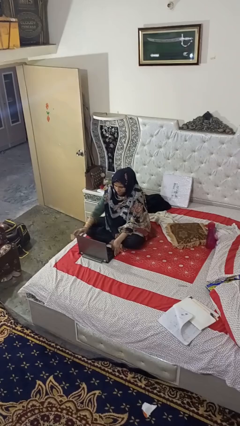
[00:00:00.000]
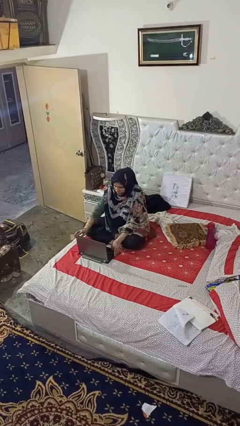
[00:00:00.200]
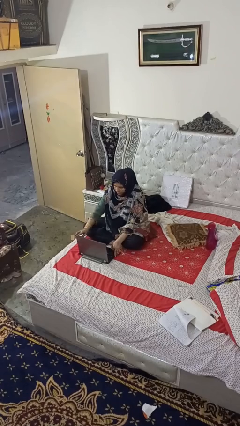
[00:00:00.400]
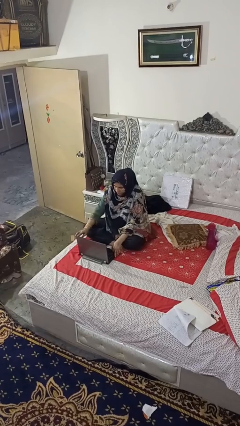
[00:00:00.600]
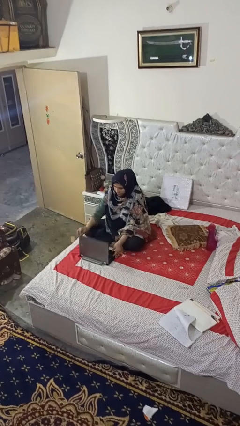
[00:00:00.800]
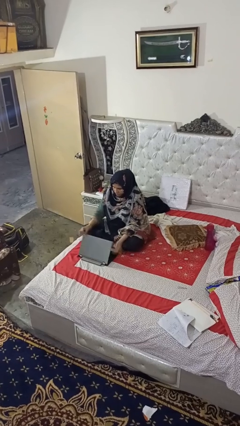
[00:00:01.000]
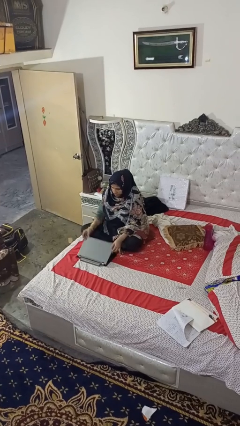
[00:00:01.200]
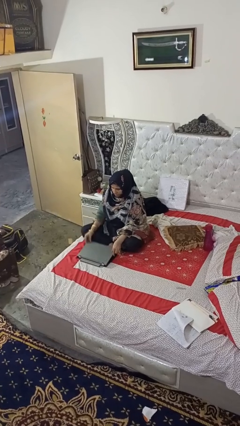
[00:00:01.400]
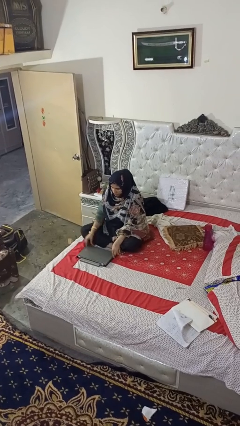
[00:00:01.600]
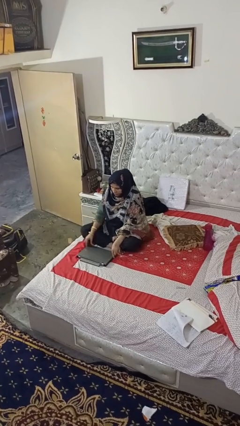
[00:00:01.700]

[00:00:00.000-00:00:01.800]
person closes laptop

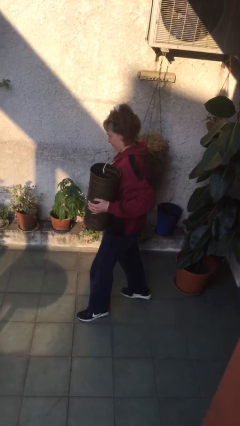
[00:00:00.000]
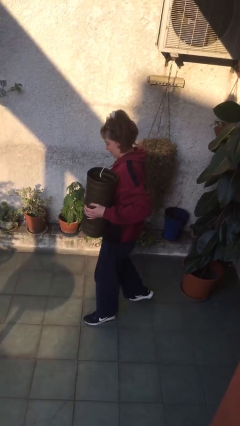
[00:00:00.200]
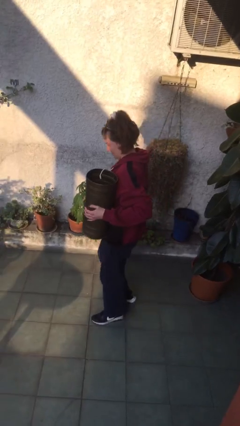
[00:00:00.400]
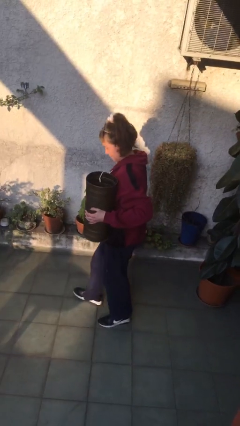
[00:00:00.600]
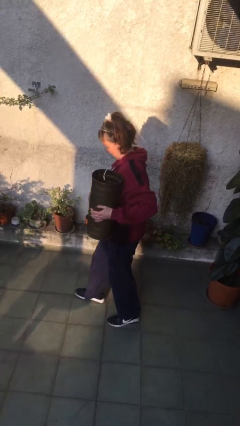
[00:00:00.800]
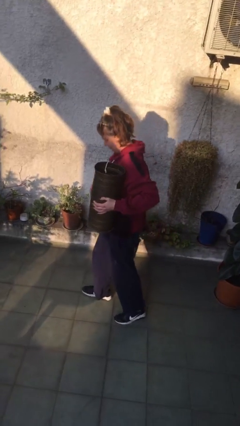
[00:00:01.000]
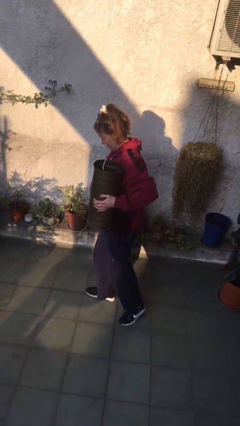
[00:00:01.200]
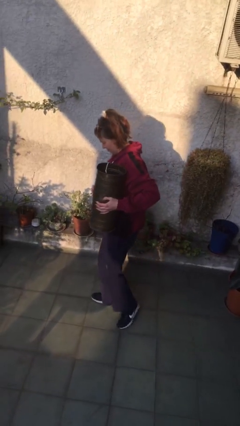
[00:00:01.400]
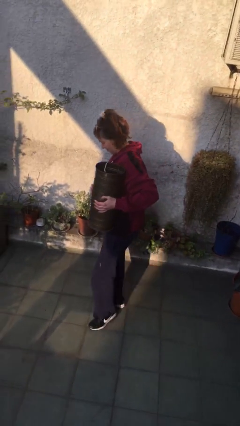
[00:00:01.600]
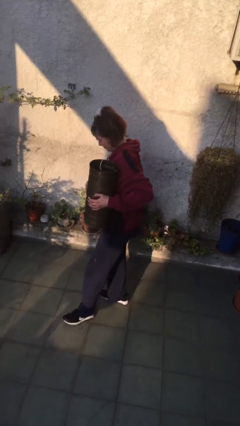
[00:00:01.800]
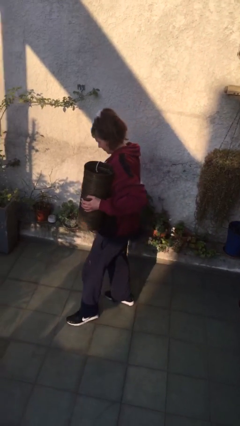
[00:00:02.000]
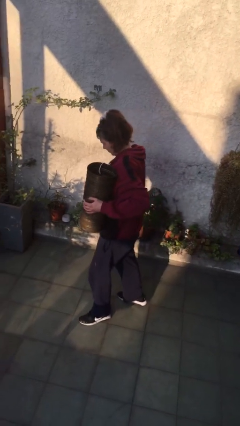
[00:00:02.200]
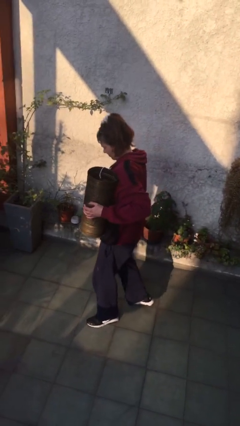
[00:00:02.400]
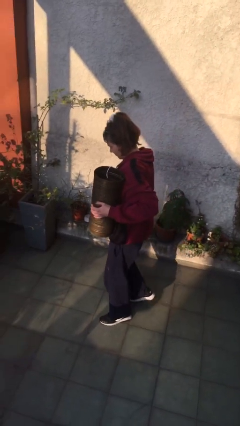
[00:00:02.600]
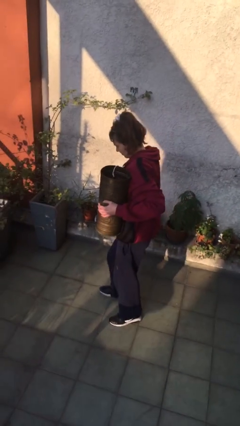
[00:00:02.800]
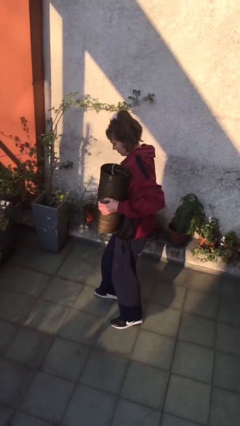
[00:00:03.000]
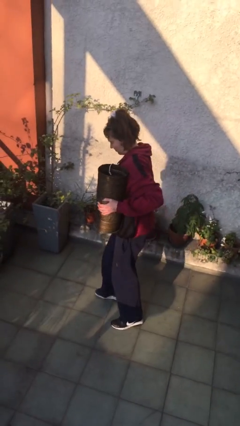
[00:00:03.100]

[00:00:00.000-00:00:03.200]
person carries heavy object

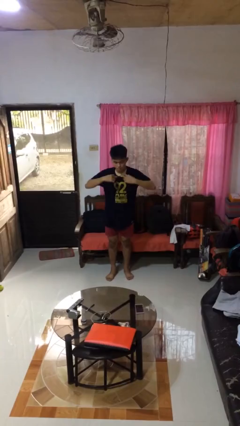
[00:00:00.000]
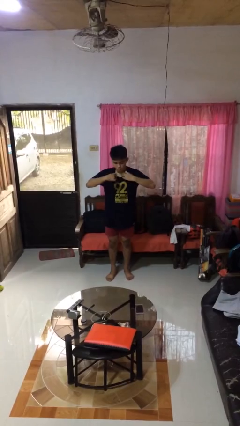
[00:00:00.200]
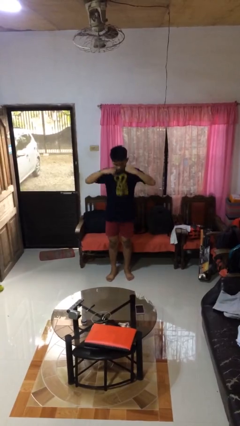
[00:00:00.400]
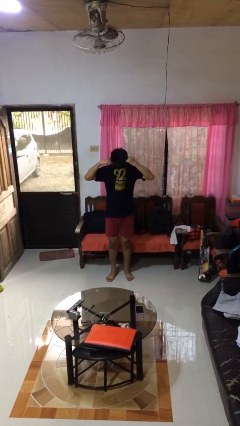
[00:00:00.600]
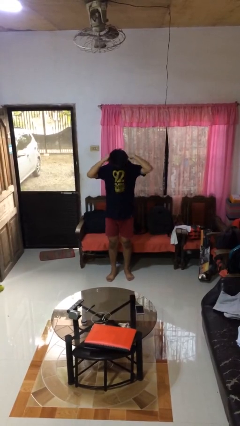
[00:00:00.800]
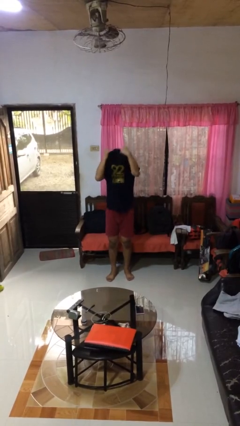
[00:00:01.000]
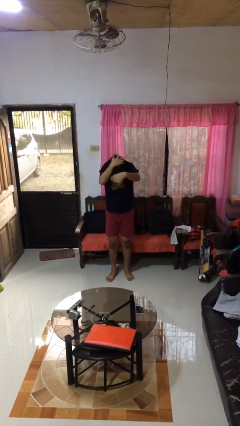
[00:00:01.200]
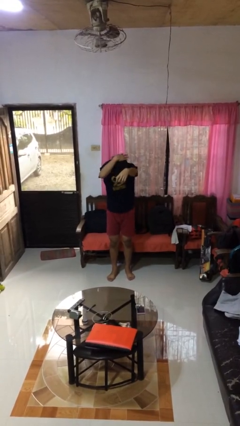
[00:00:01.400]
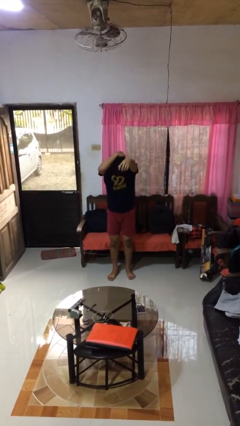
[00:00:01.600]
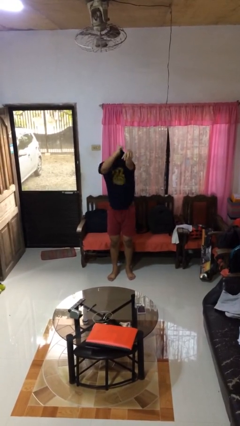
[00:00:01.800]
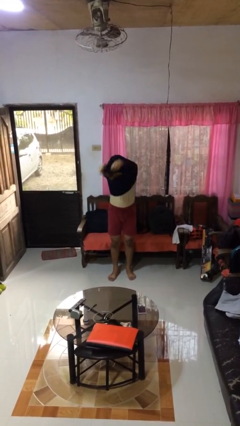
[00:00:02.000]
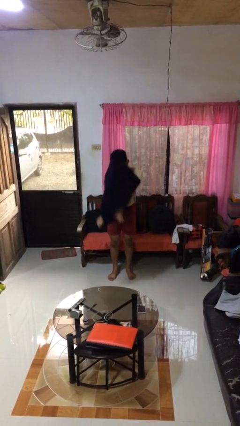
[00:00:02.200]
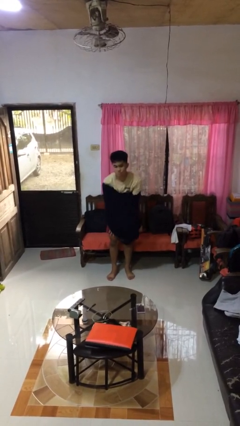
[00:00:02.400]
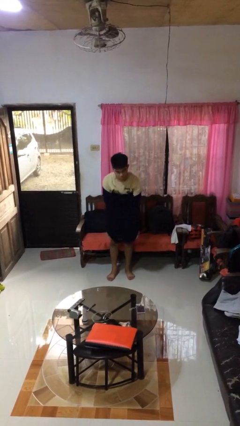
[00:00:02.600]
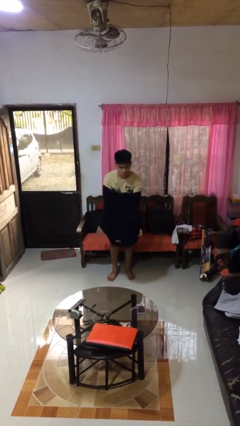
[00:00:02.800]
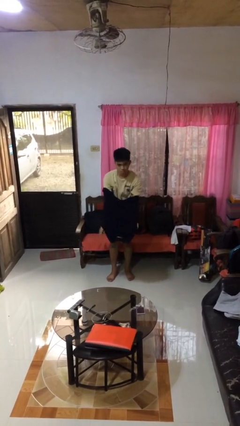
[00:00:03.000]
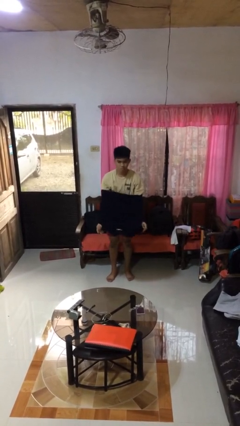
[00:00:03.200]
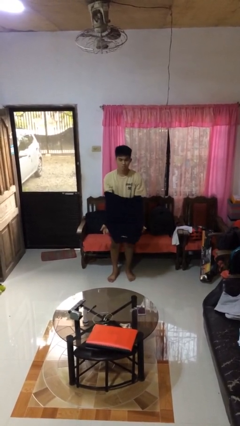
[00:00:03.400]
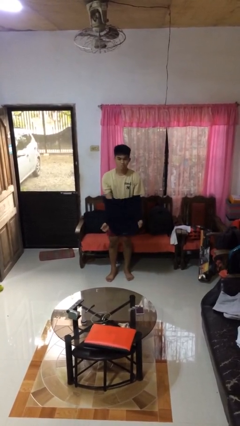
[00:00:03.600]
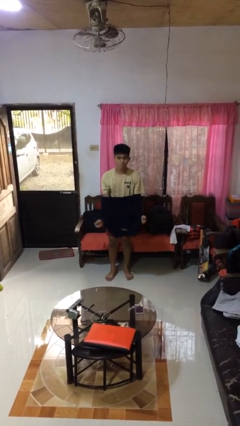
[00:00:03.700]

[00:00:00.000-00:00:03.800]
person takes off shirt

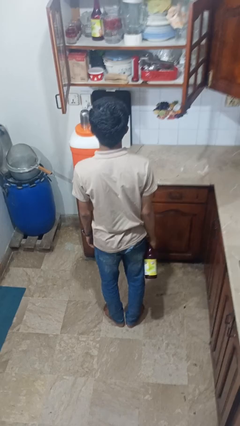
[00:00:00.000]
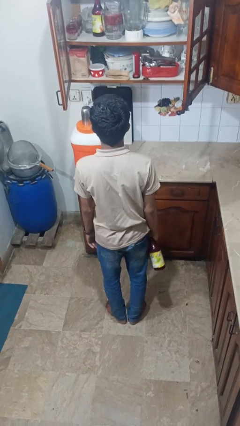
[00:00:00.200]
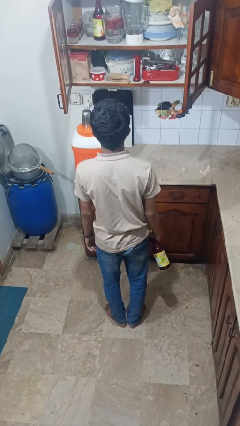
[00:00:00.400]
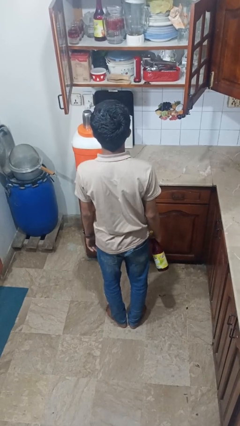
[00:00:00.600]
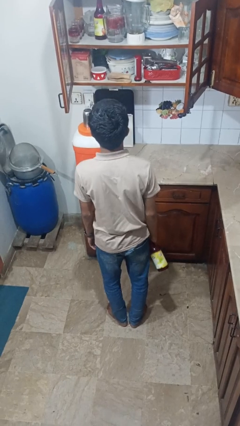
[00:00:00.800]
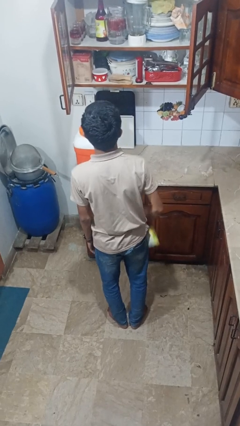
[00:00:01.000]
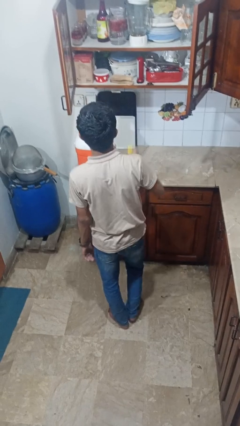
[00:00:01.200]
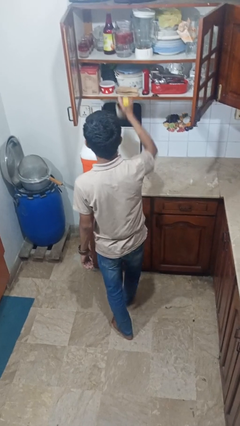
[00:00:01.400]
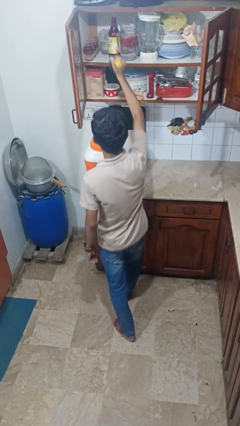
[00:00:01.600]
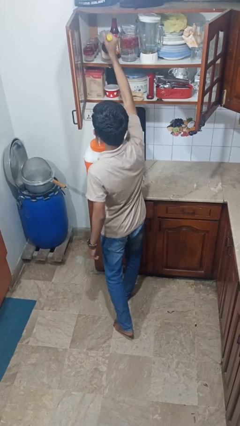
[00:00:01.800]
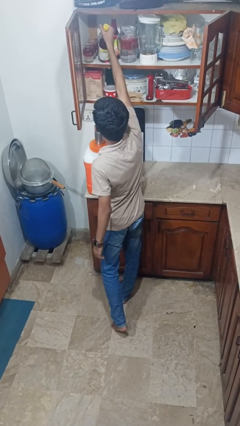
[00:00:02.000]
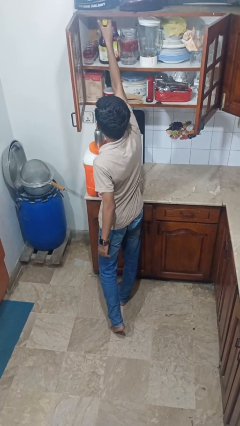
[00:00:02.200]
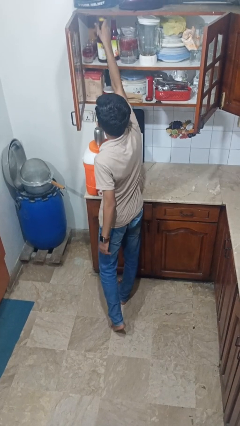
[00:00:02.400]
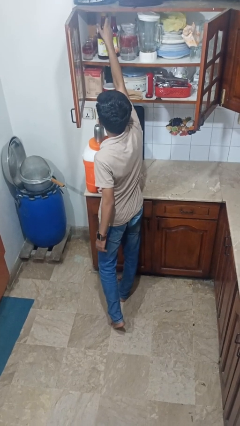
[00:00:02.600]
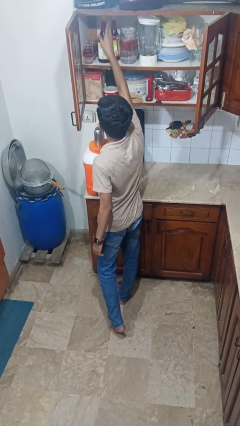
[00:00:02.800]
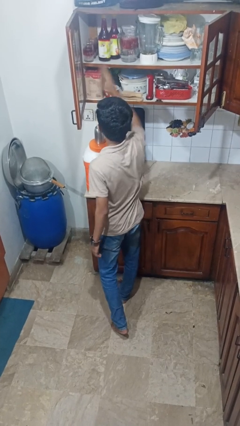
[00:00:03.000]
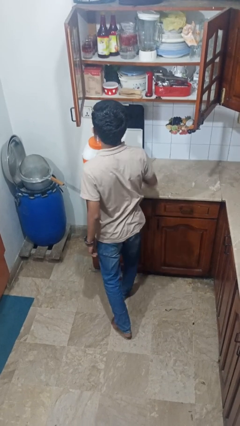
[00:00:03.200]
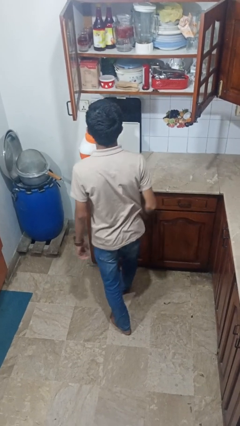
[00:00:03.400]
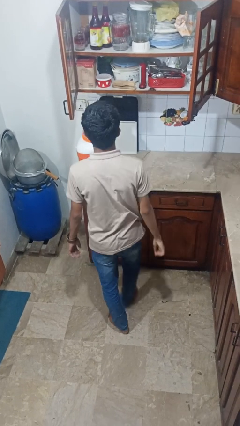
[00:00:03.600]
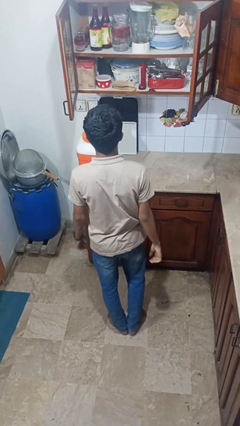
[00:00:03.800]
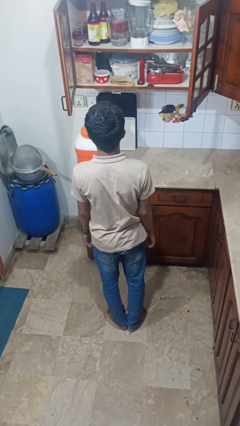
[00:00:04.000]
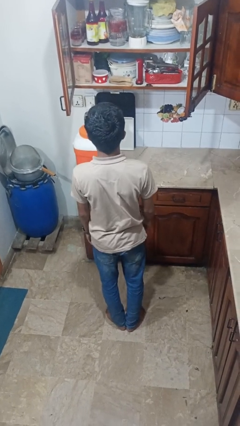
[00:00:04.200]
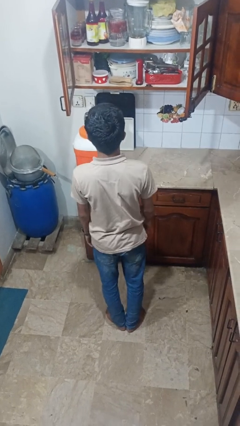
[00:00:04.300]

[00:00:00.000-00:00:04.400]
person puts down object into cabinet

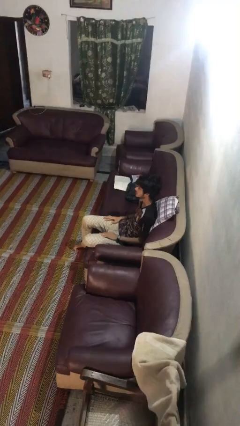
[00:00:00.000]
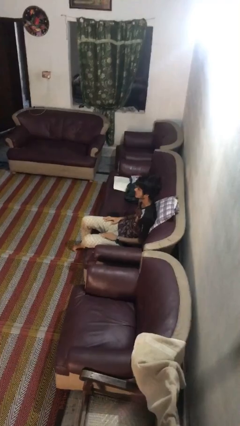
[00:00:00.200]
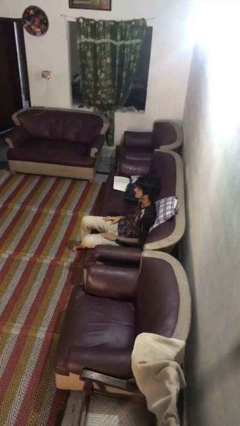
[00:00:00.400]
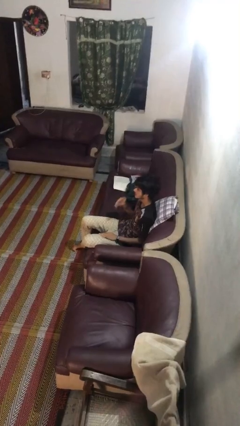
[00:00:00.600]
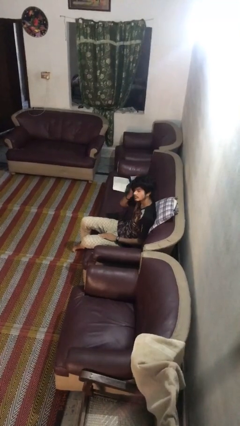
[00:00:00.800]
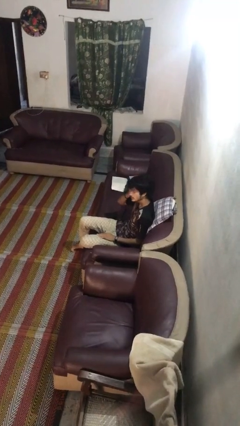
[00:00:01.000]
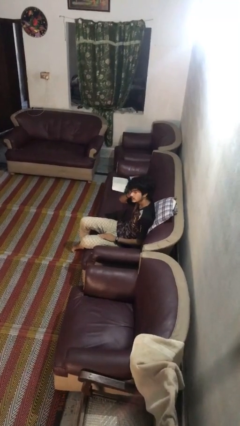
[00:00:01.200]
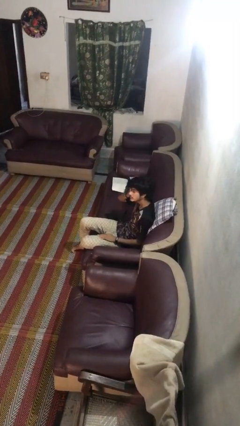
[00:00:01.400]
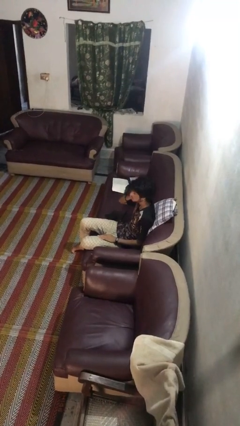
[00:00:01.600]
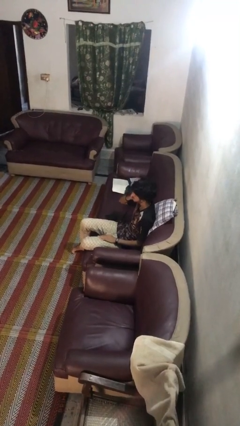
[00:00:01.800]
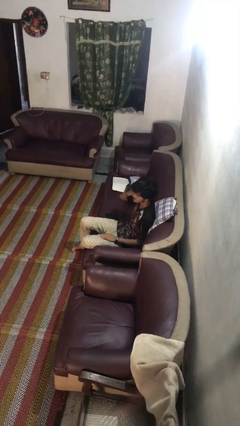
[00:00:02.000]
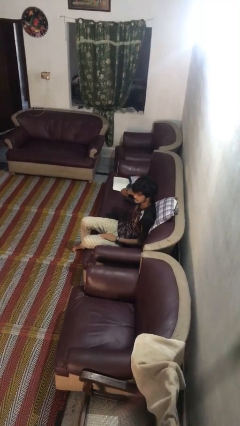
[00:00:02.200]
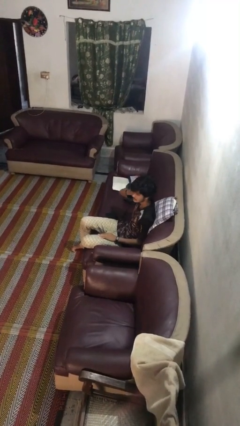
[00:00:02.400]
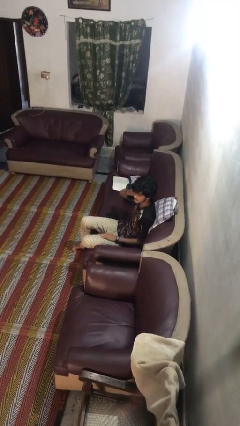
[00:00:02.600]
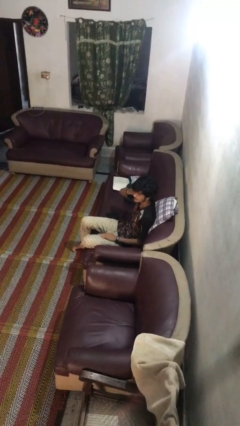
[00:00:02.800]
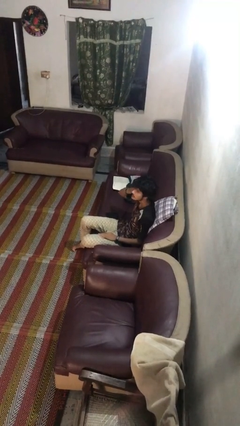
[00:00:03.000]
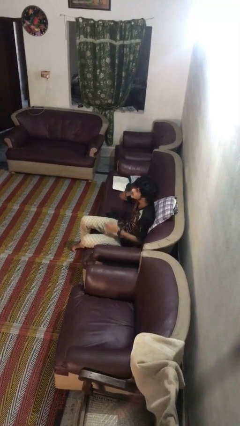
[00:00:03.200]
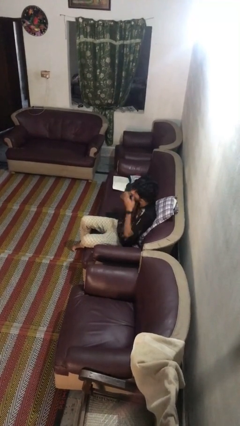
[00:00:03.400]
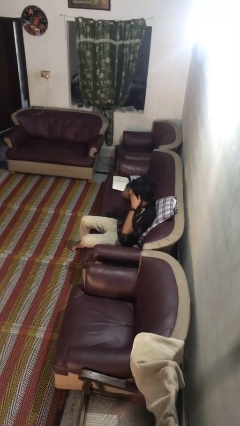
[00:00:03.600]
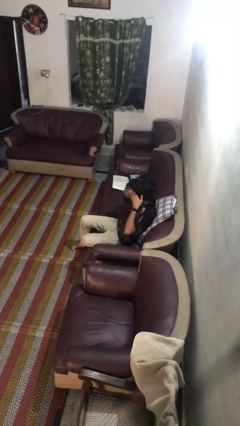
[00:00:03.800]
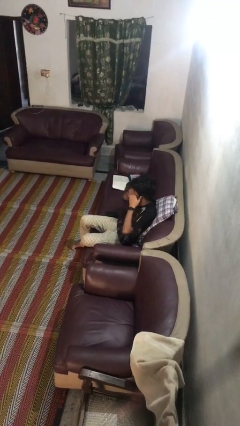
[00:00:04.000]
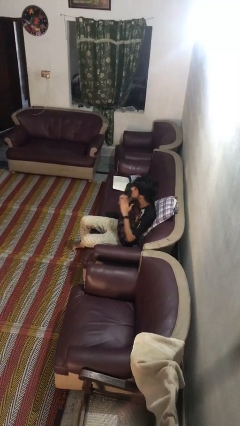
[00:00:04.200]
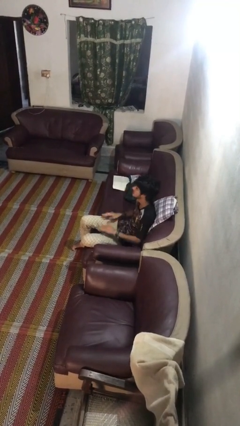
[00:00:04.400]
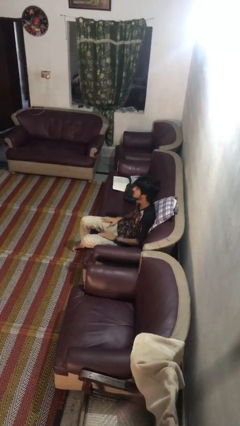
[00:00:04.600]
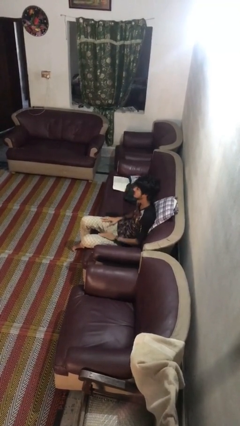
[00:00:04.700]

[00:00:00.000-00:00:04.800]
person rubs eyes
